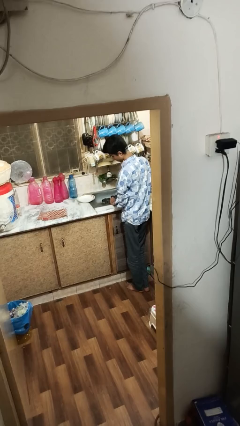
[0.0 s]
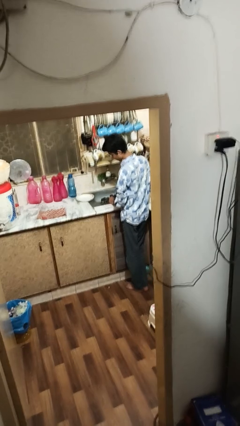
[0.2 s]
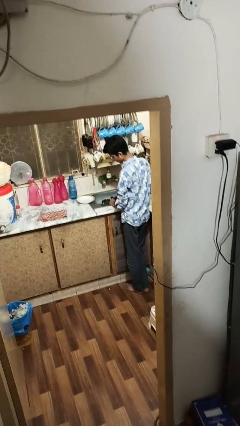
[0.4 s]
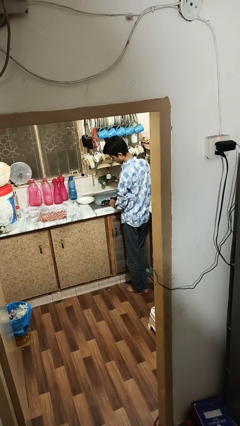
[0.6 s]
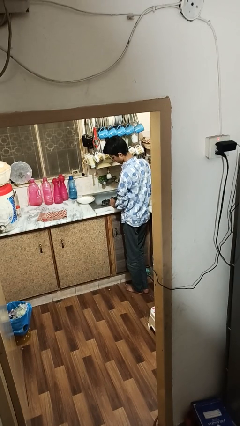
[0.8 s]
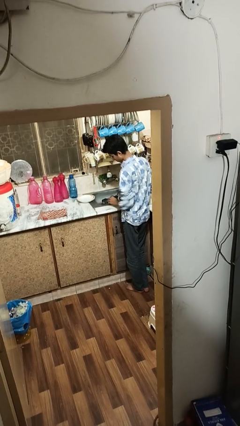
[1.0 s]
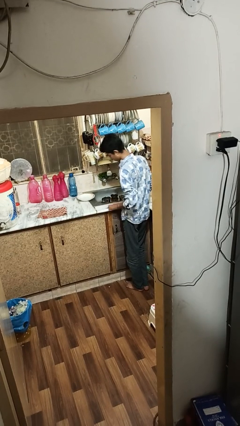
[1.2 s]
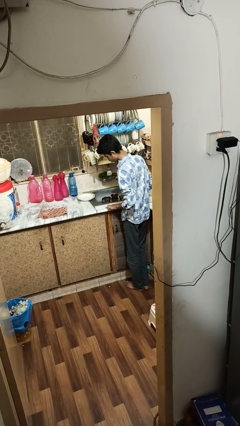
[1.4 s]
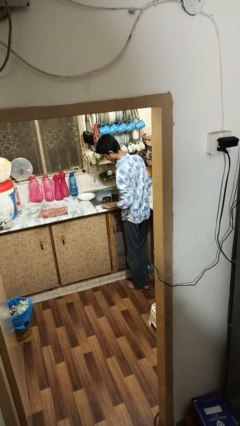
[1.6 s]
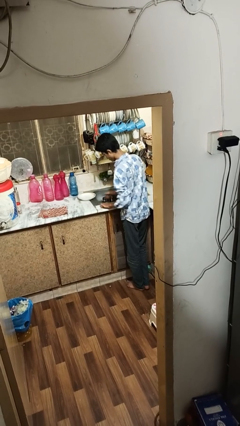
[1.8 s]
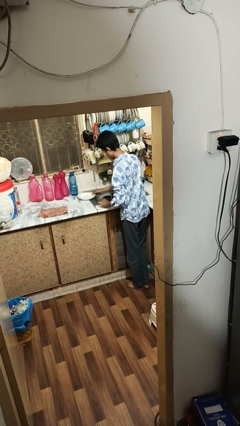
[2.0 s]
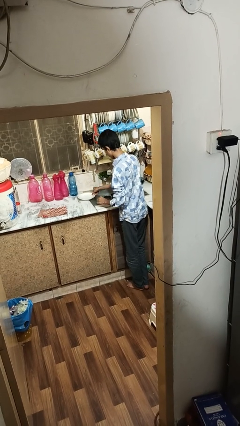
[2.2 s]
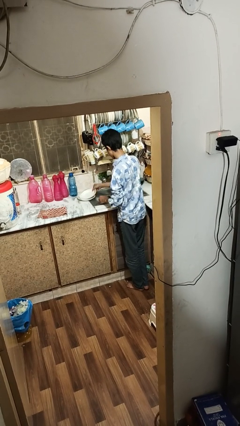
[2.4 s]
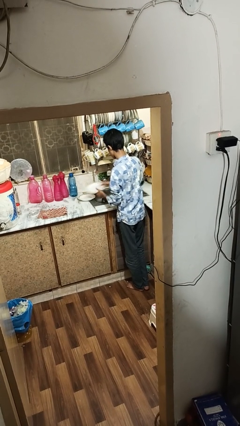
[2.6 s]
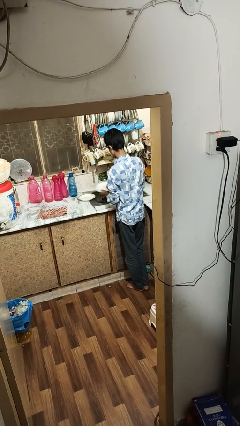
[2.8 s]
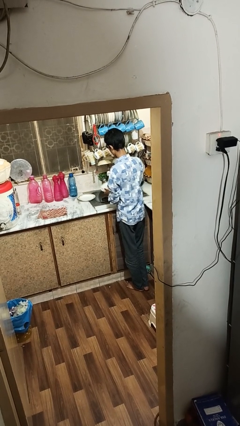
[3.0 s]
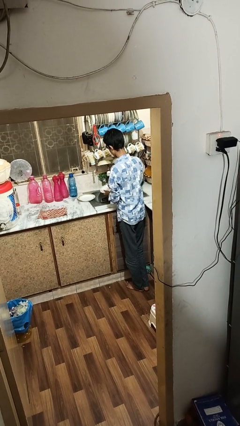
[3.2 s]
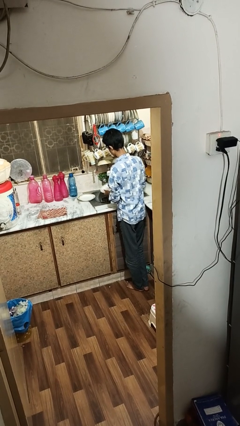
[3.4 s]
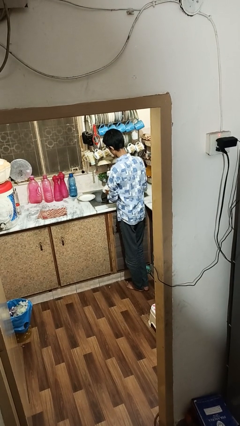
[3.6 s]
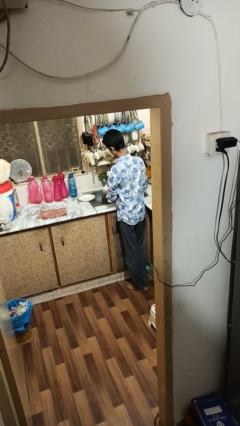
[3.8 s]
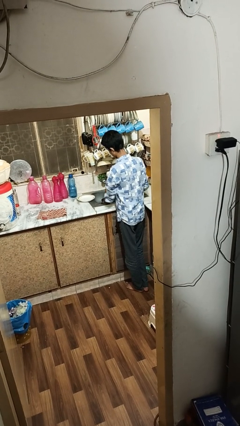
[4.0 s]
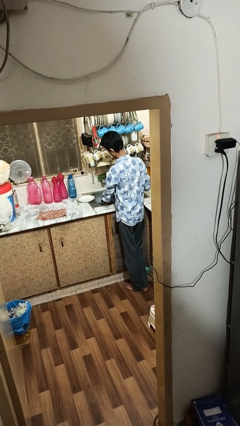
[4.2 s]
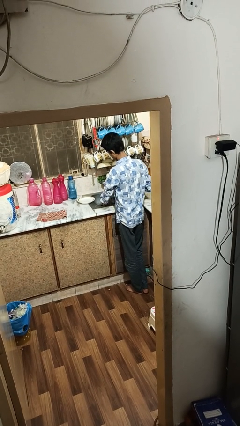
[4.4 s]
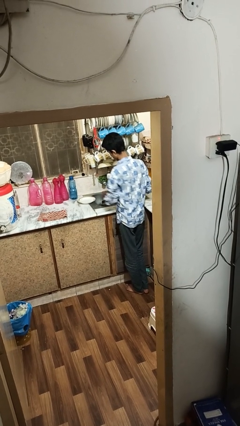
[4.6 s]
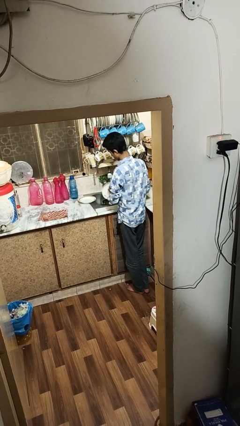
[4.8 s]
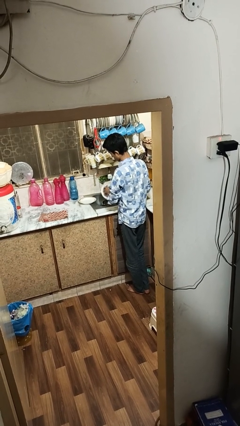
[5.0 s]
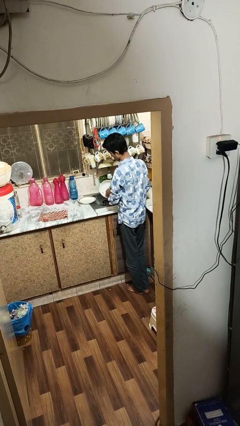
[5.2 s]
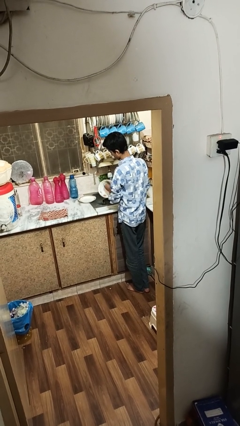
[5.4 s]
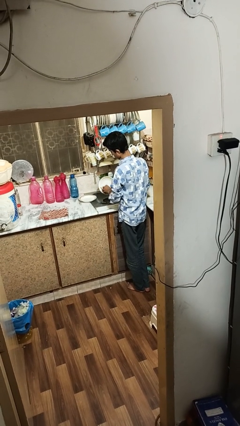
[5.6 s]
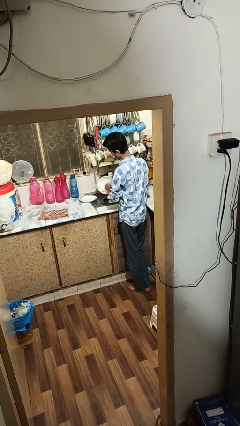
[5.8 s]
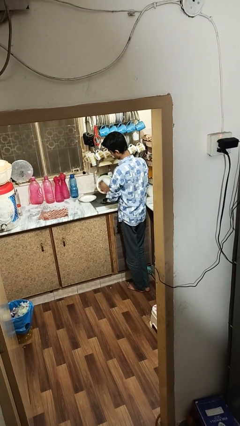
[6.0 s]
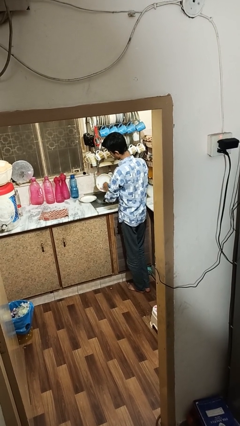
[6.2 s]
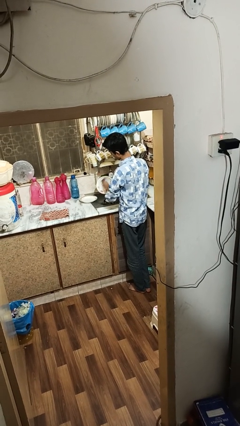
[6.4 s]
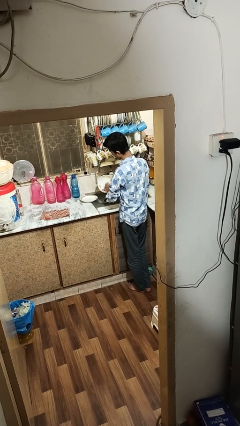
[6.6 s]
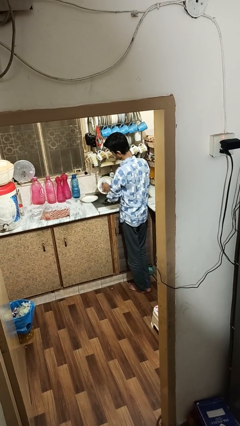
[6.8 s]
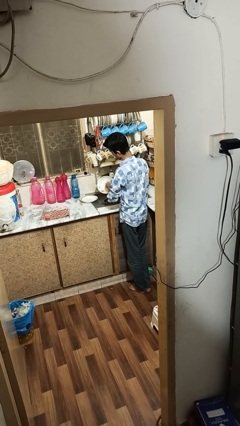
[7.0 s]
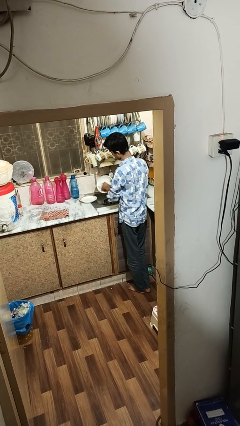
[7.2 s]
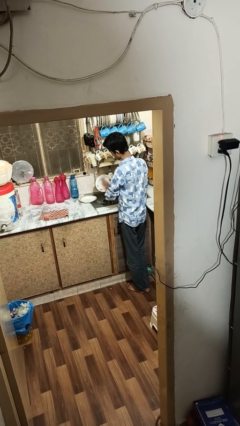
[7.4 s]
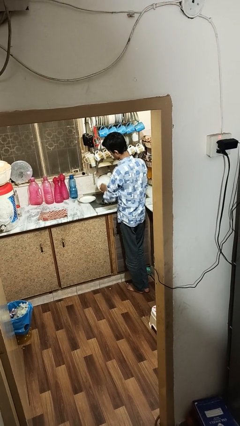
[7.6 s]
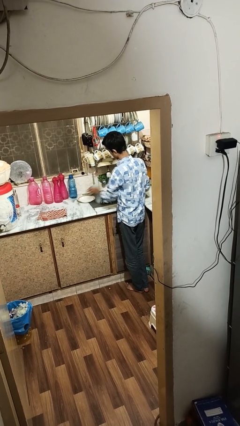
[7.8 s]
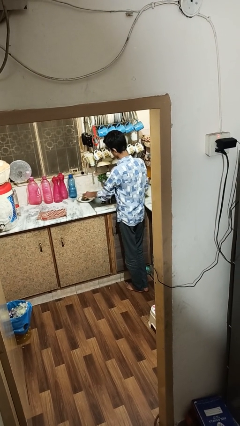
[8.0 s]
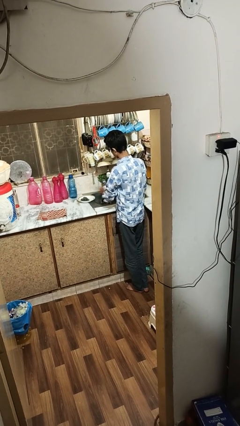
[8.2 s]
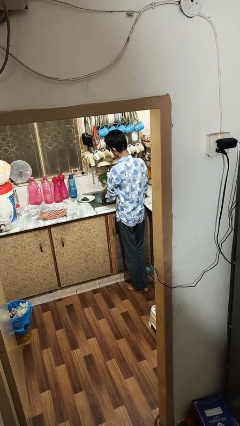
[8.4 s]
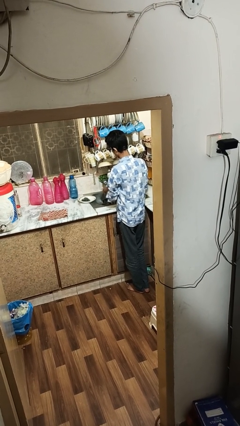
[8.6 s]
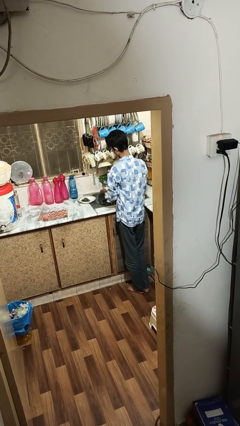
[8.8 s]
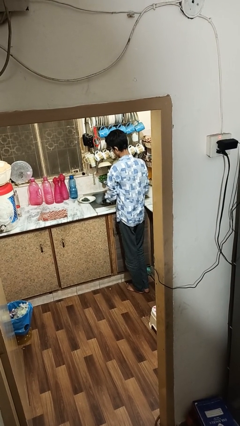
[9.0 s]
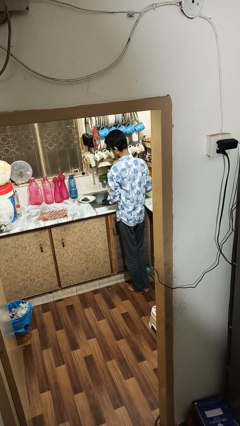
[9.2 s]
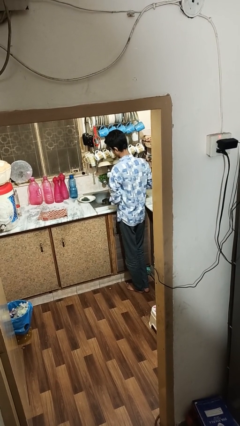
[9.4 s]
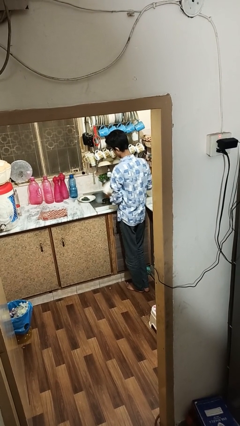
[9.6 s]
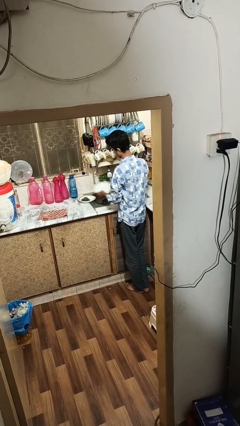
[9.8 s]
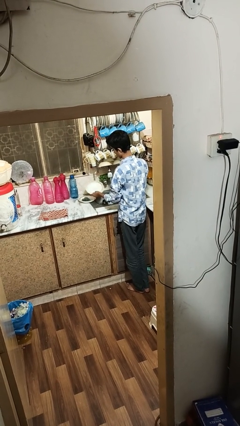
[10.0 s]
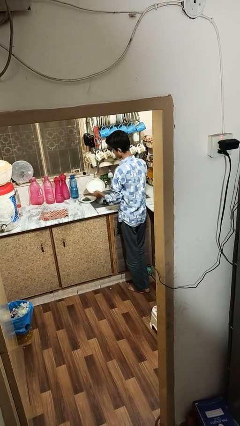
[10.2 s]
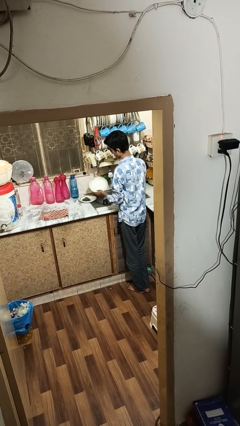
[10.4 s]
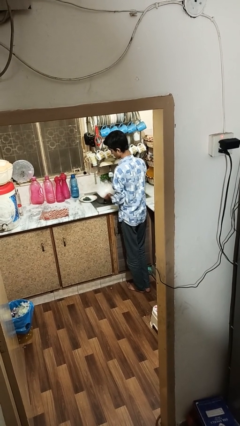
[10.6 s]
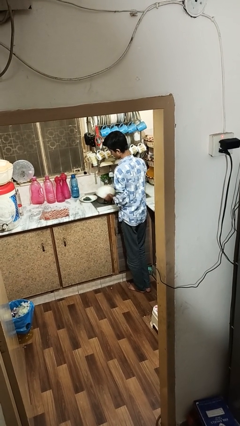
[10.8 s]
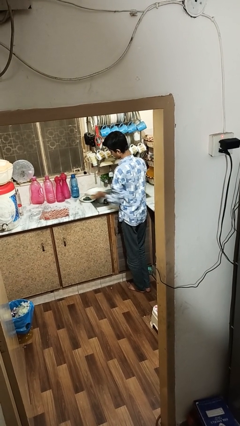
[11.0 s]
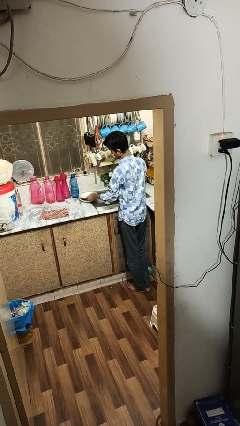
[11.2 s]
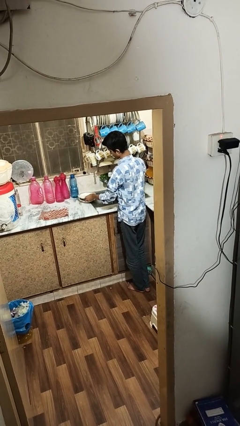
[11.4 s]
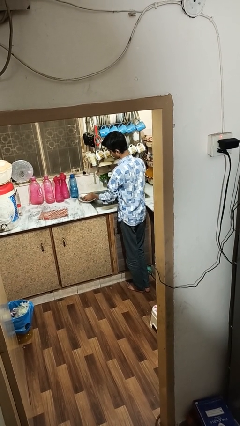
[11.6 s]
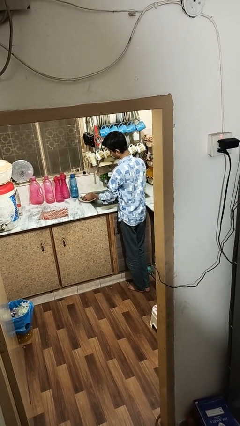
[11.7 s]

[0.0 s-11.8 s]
person washes dish

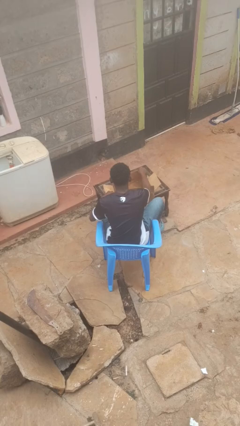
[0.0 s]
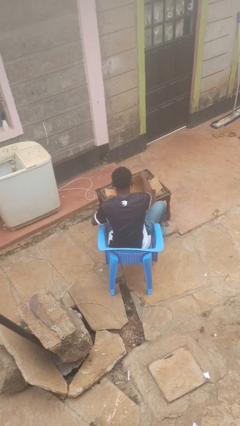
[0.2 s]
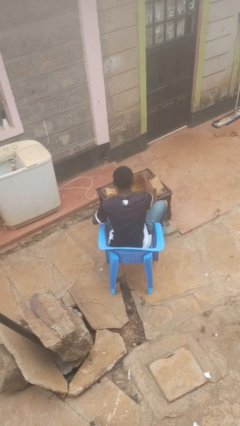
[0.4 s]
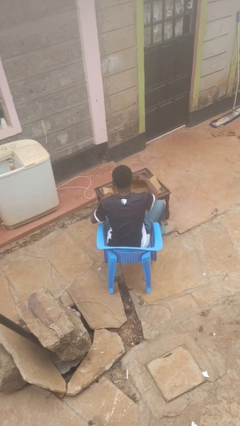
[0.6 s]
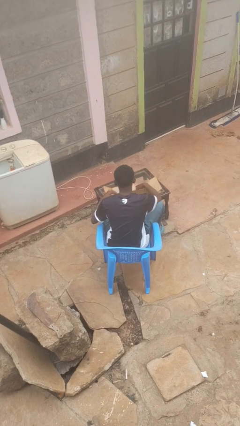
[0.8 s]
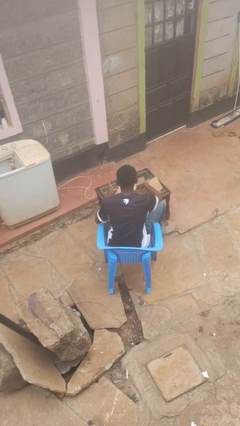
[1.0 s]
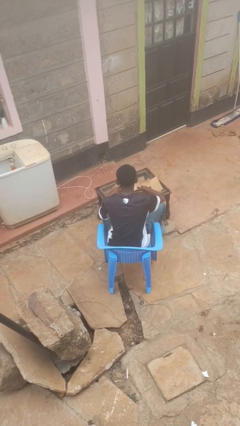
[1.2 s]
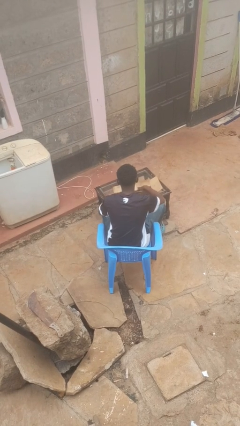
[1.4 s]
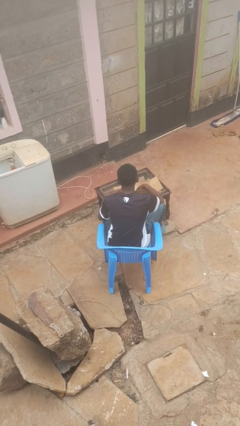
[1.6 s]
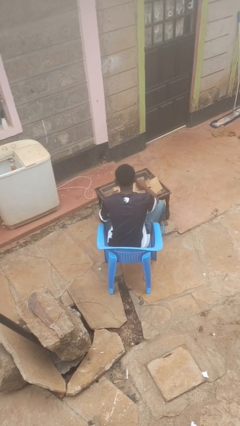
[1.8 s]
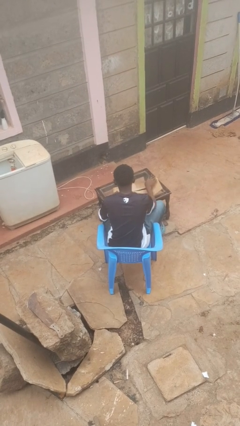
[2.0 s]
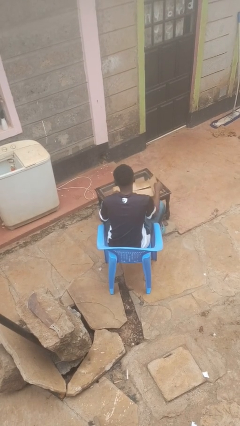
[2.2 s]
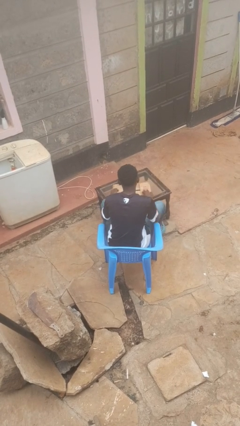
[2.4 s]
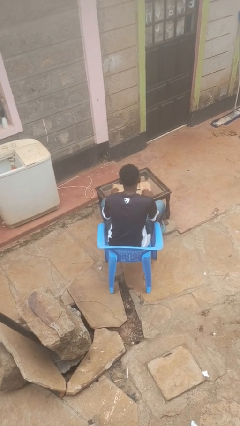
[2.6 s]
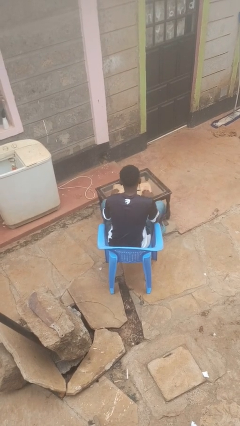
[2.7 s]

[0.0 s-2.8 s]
person closes box

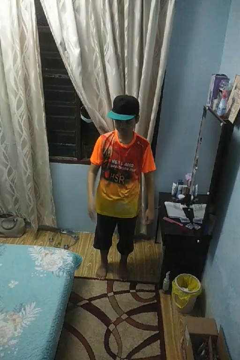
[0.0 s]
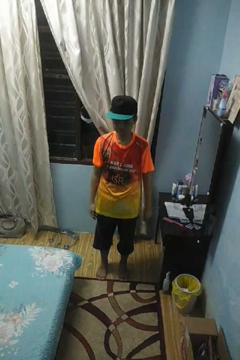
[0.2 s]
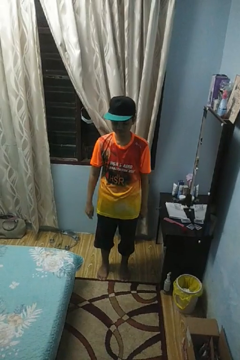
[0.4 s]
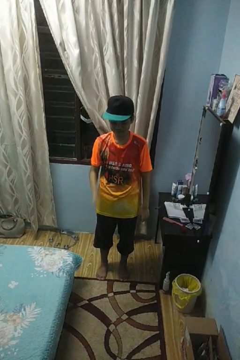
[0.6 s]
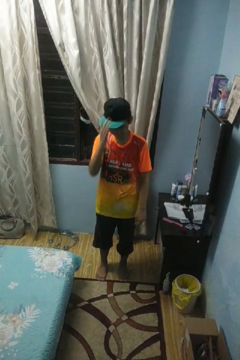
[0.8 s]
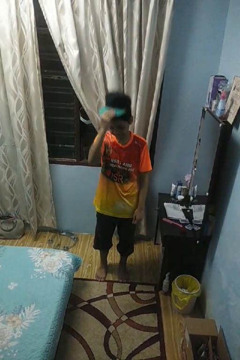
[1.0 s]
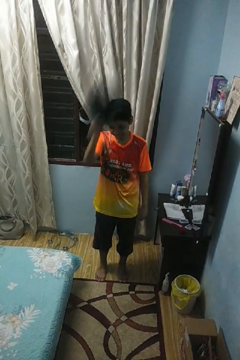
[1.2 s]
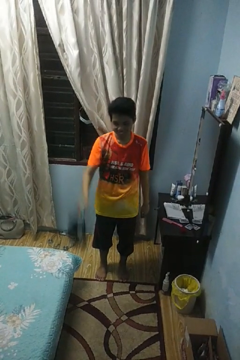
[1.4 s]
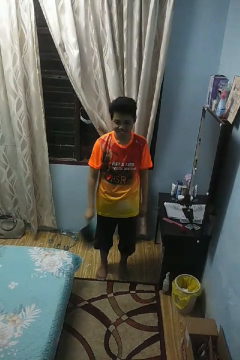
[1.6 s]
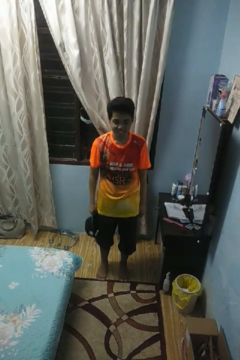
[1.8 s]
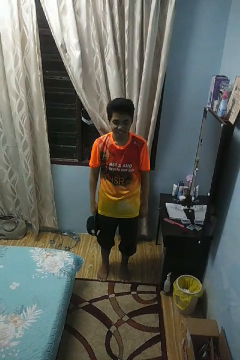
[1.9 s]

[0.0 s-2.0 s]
person takes off hat

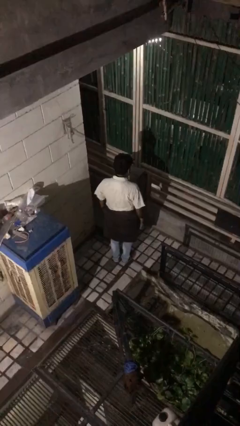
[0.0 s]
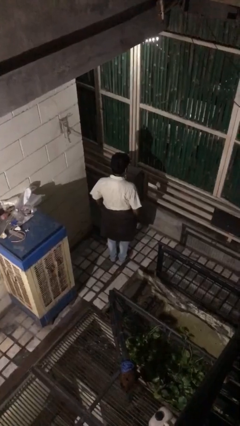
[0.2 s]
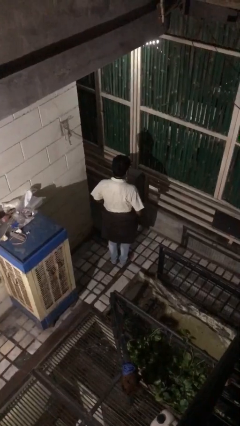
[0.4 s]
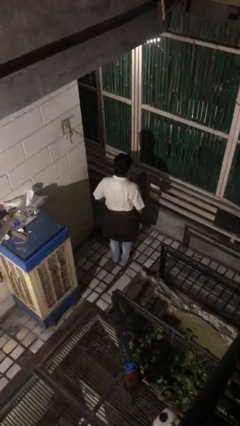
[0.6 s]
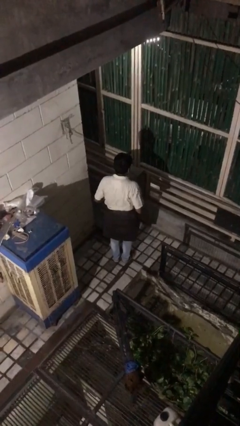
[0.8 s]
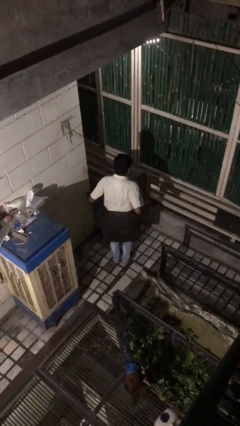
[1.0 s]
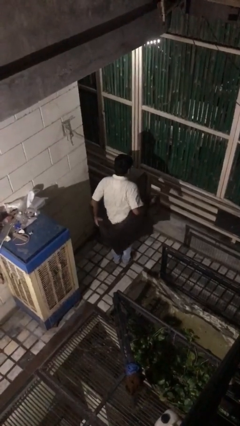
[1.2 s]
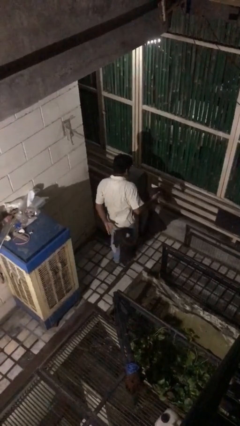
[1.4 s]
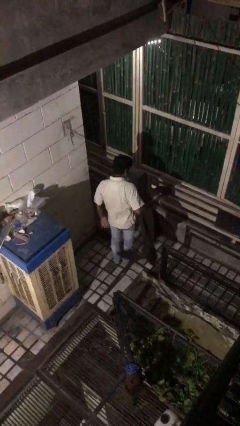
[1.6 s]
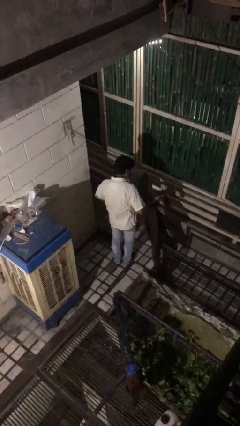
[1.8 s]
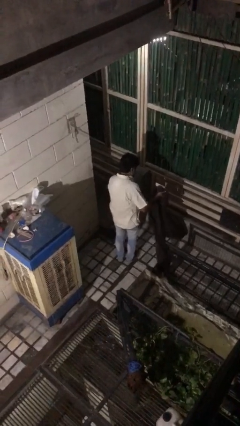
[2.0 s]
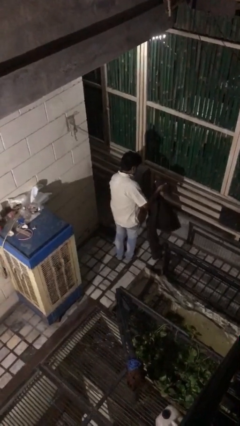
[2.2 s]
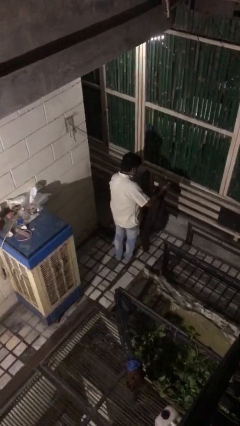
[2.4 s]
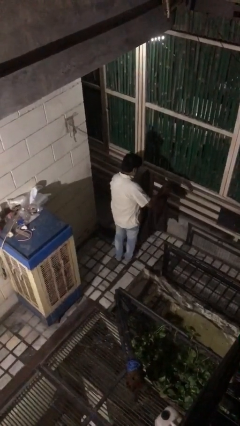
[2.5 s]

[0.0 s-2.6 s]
person unties jacket around waist
